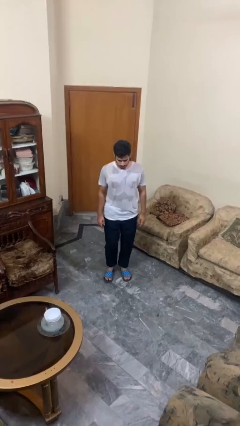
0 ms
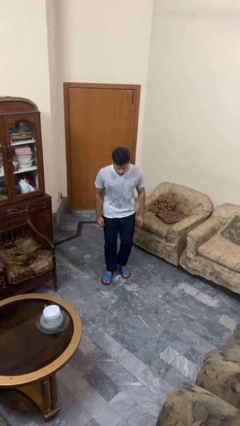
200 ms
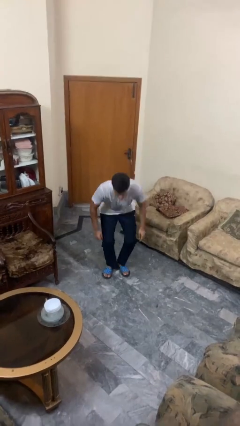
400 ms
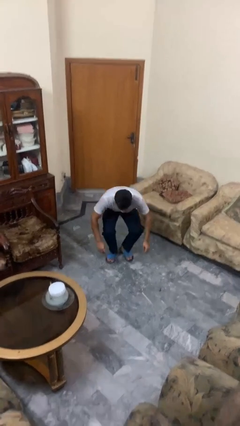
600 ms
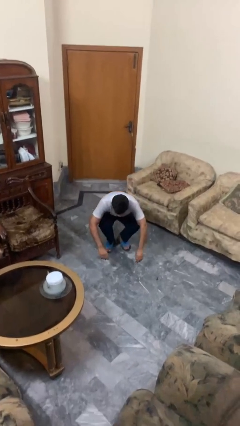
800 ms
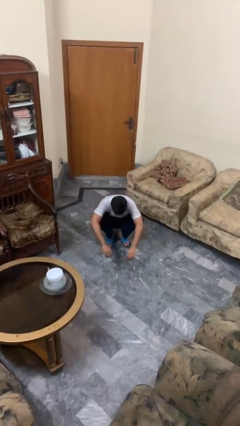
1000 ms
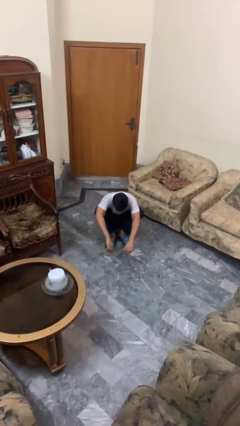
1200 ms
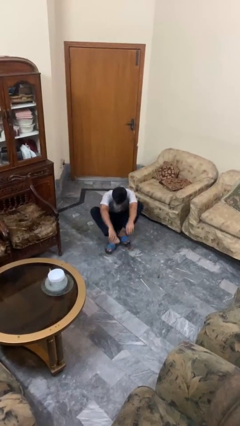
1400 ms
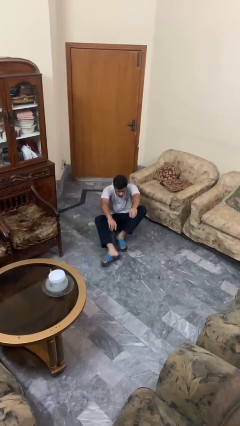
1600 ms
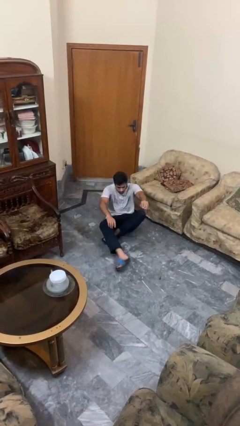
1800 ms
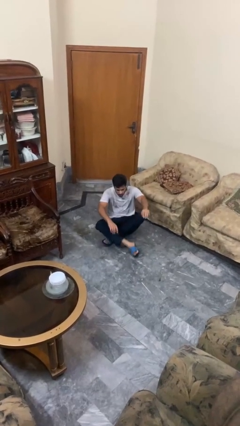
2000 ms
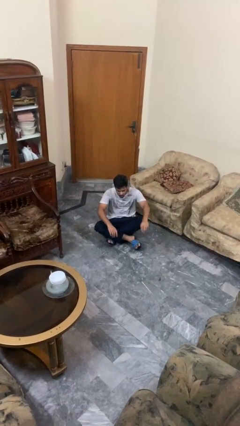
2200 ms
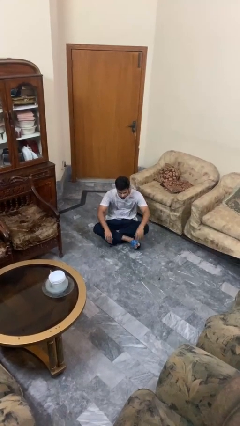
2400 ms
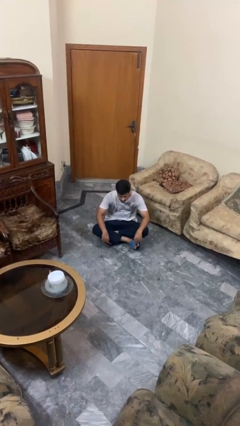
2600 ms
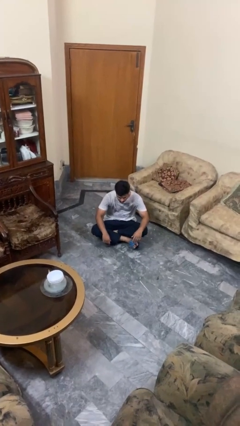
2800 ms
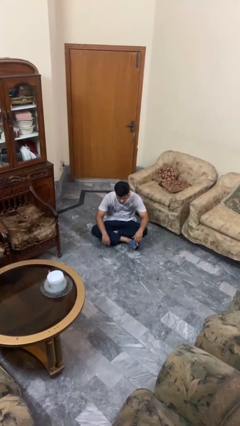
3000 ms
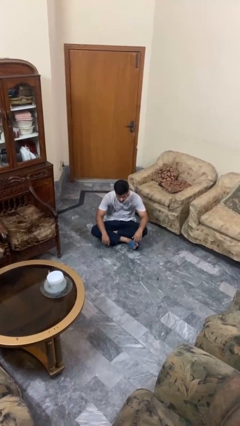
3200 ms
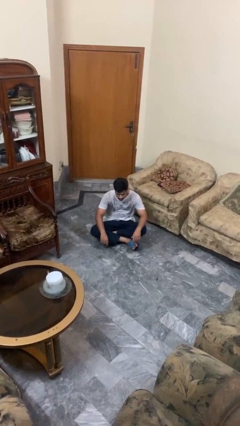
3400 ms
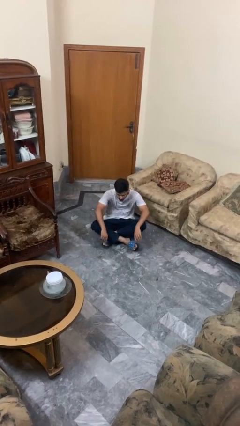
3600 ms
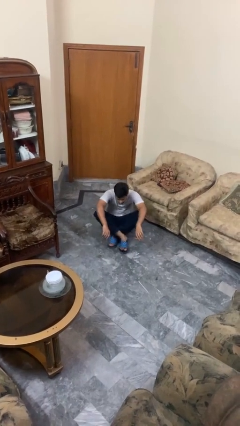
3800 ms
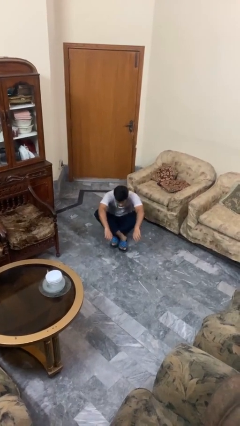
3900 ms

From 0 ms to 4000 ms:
person sits crisscross

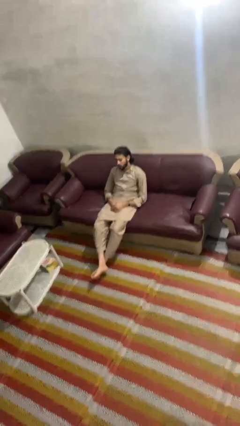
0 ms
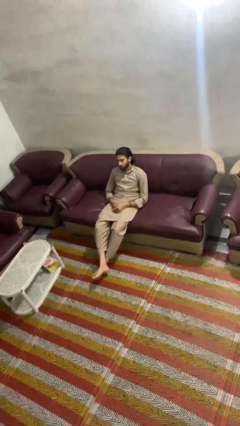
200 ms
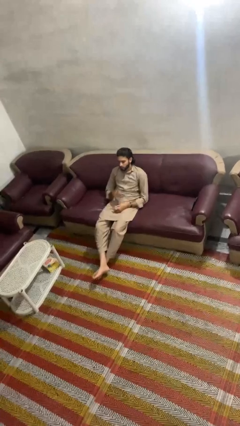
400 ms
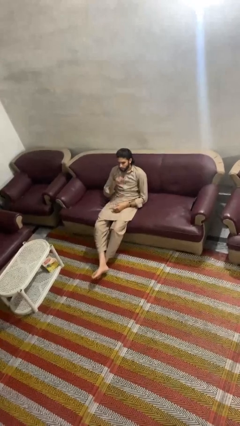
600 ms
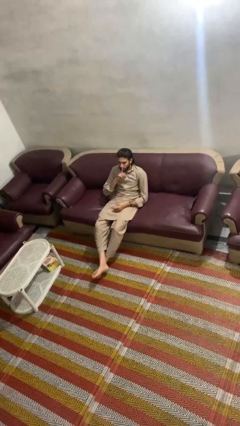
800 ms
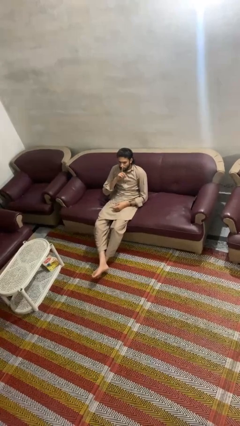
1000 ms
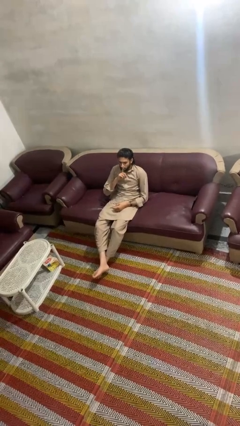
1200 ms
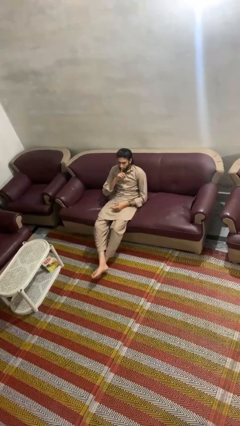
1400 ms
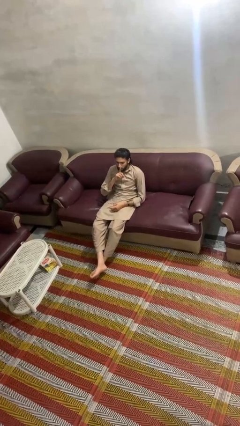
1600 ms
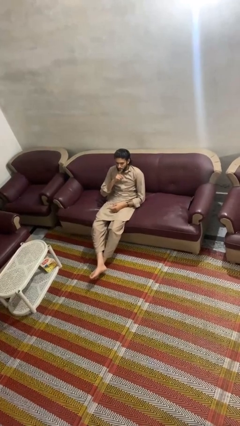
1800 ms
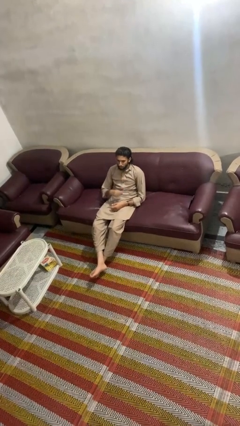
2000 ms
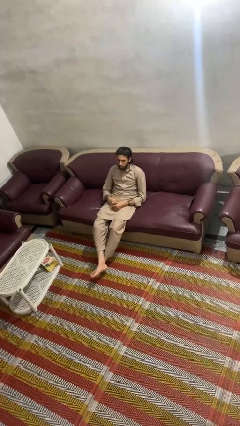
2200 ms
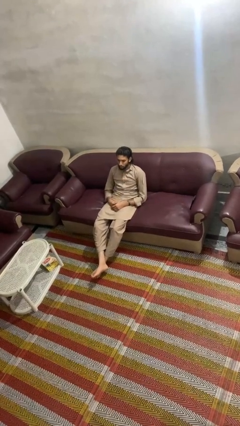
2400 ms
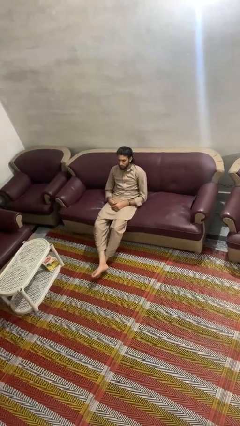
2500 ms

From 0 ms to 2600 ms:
person gestures be quiet

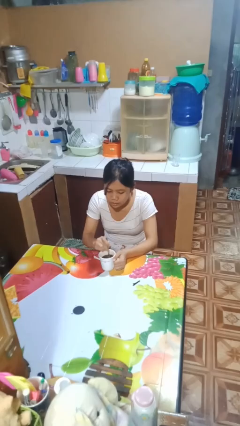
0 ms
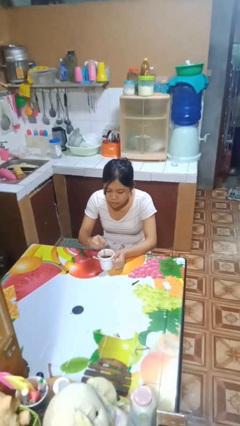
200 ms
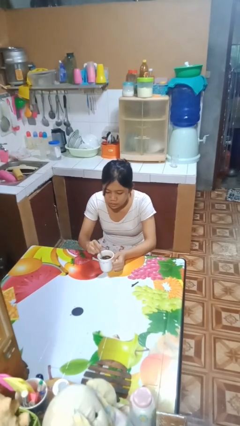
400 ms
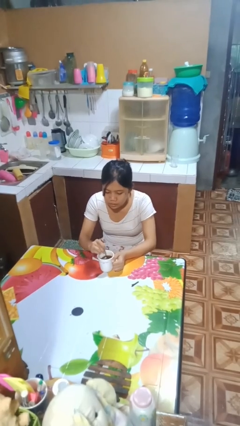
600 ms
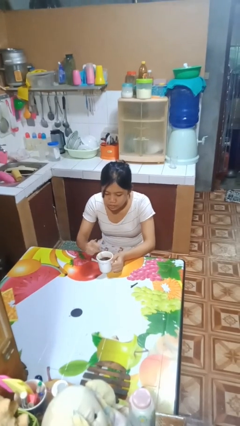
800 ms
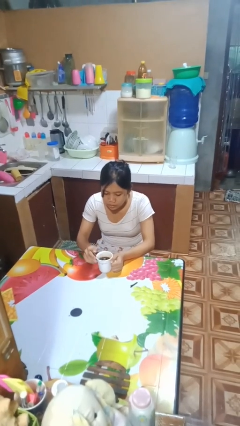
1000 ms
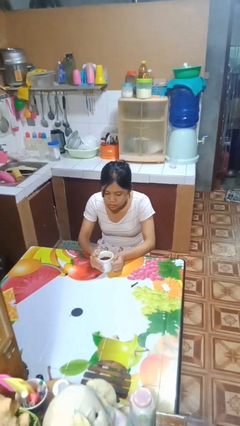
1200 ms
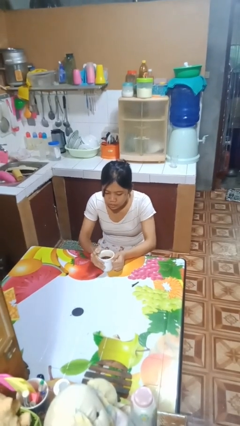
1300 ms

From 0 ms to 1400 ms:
person stirs mug

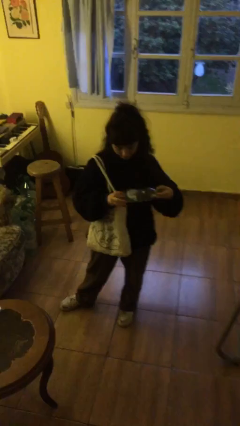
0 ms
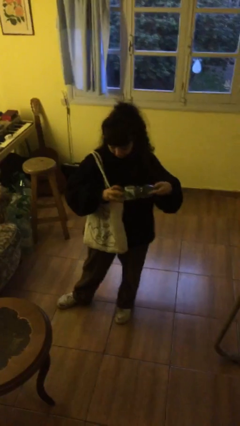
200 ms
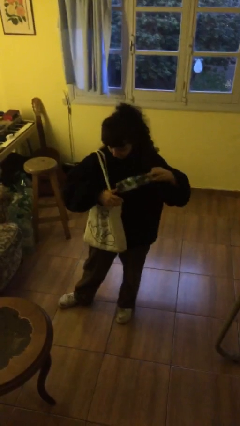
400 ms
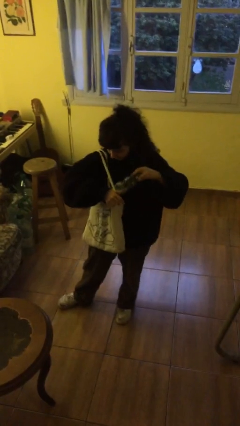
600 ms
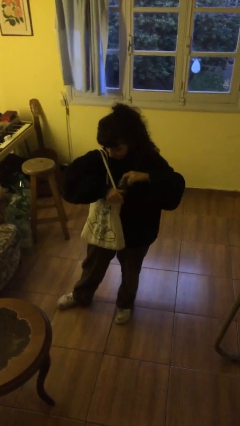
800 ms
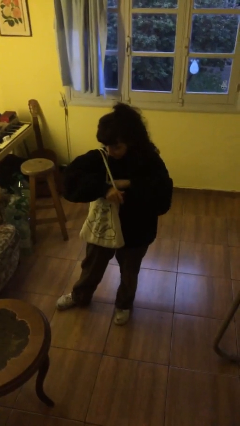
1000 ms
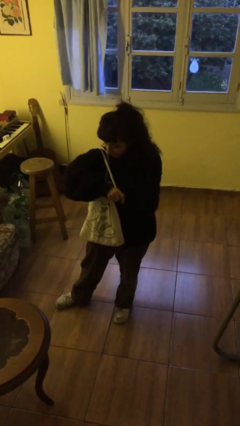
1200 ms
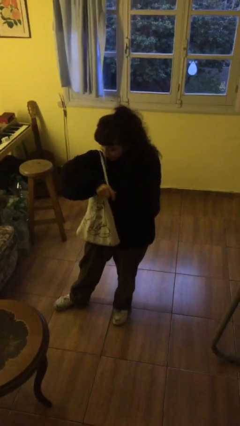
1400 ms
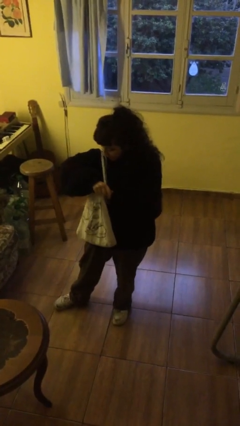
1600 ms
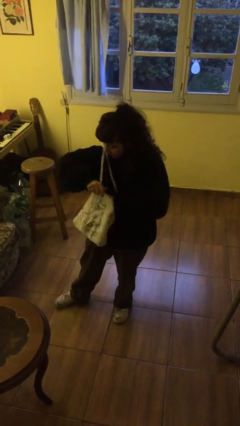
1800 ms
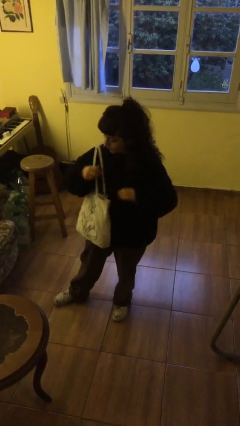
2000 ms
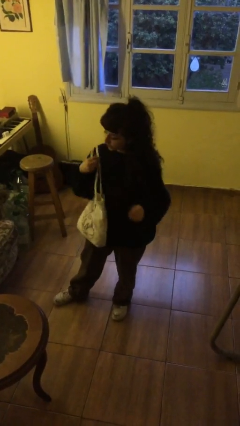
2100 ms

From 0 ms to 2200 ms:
person puts object into purse

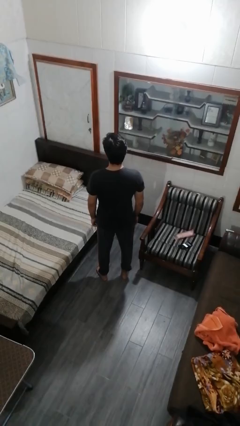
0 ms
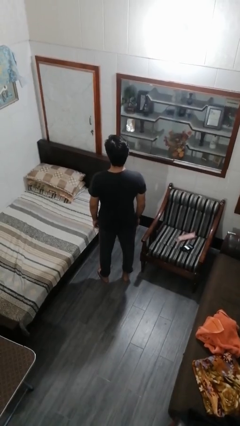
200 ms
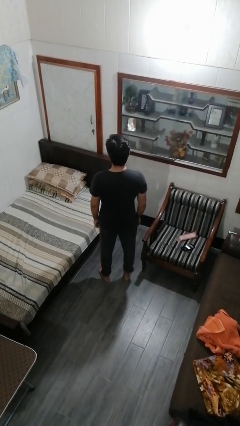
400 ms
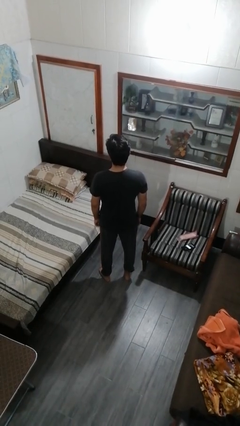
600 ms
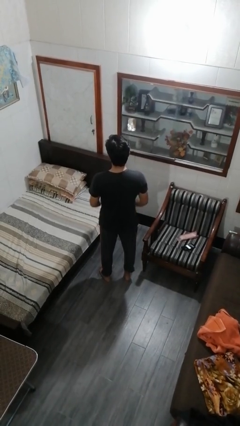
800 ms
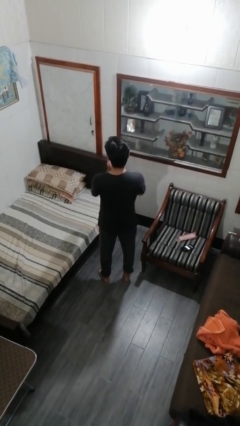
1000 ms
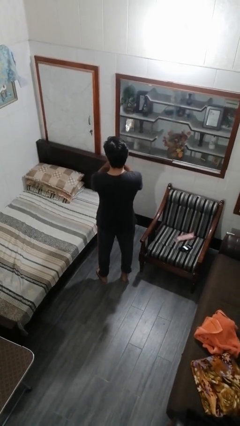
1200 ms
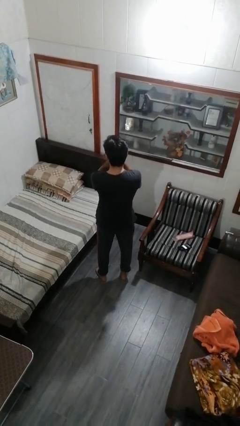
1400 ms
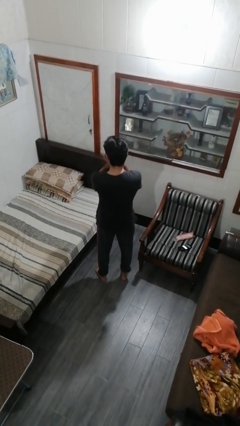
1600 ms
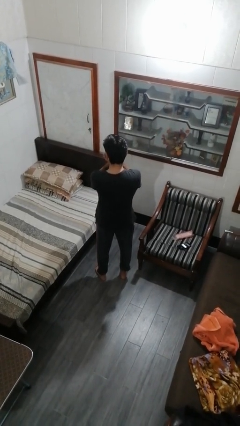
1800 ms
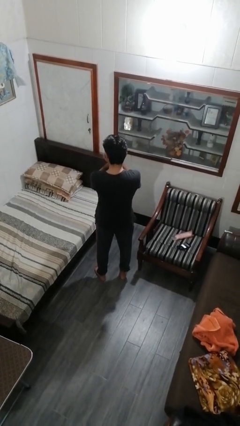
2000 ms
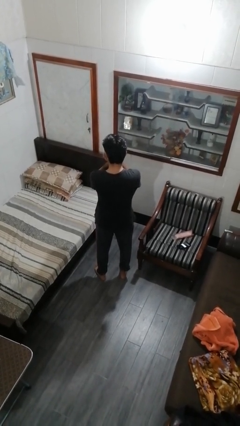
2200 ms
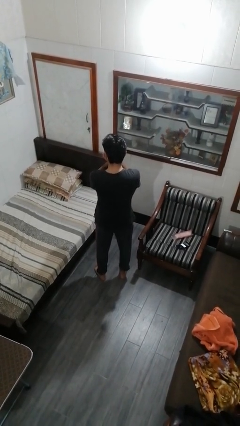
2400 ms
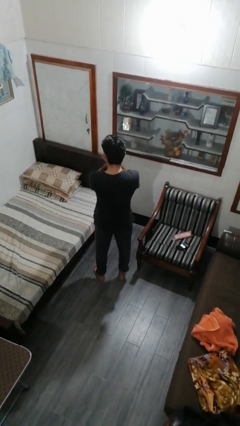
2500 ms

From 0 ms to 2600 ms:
person covers face with hands

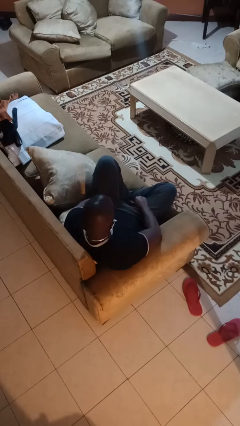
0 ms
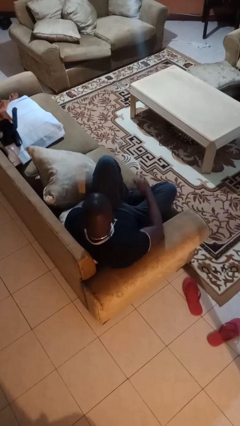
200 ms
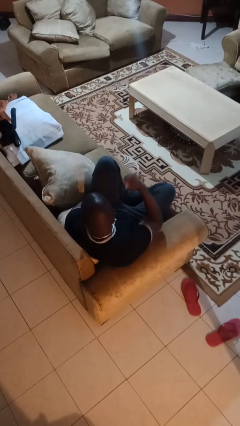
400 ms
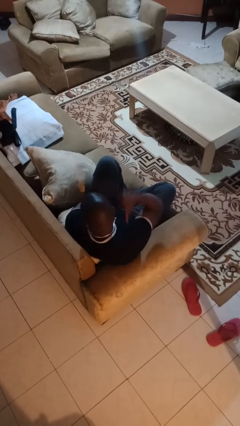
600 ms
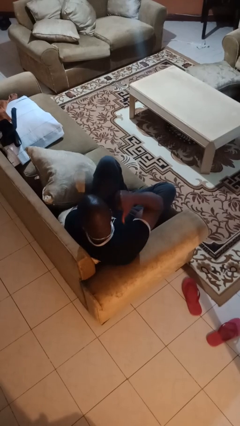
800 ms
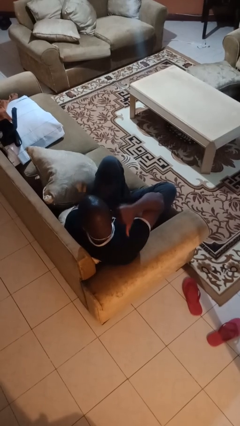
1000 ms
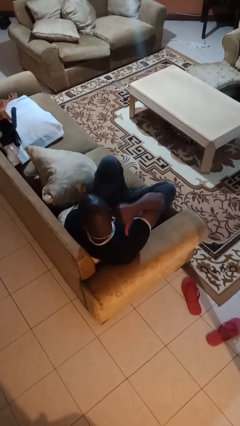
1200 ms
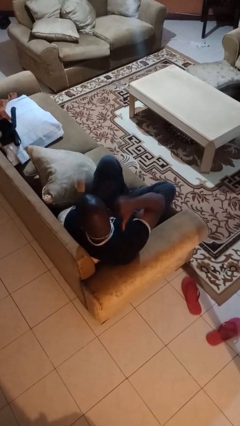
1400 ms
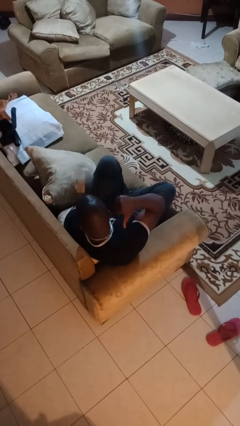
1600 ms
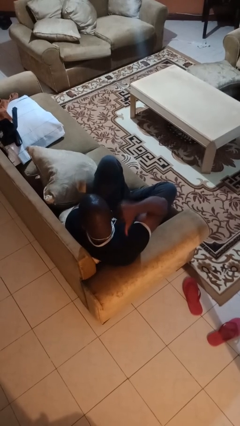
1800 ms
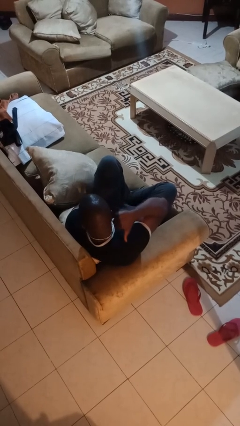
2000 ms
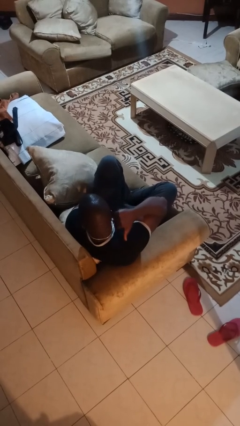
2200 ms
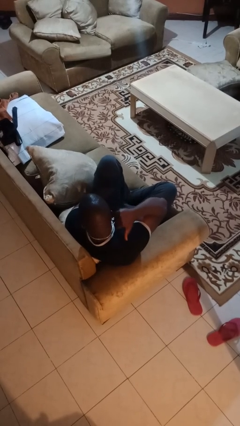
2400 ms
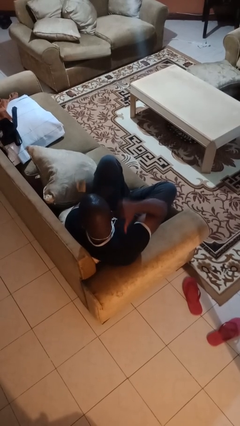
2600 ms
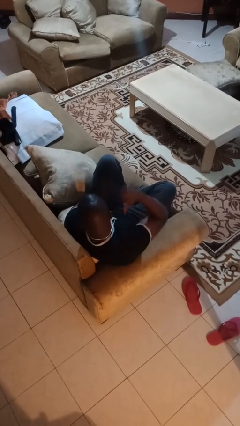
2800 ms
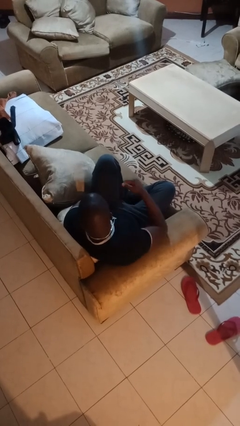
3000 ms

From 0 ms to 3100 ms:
person gestures behind me

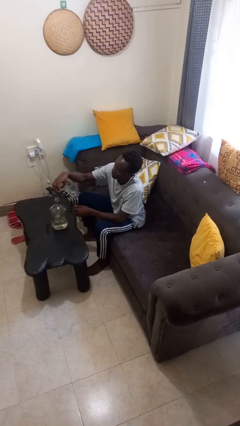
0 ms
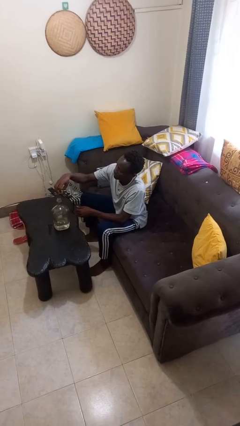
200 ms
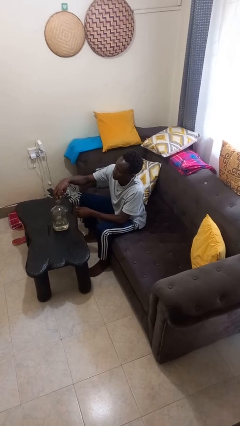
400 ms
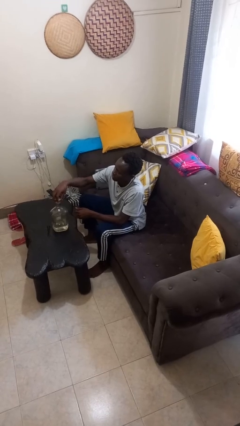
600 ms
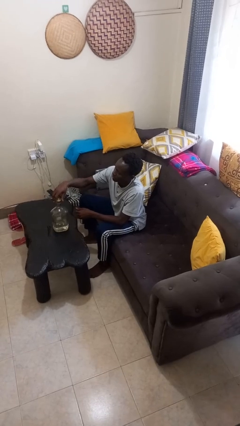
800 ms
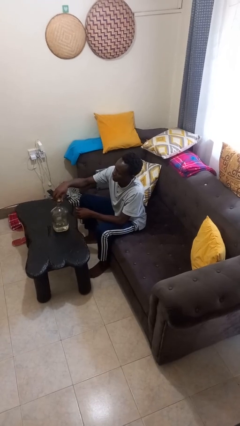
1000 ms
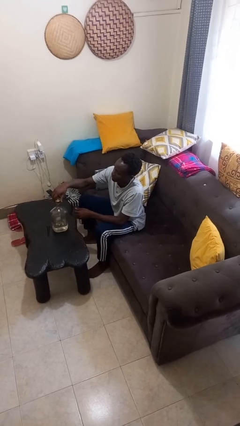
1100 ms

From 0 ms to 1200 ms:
person screws lid to bottle
